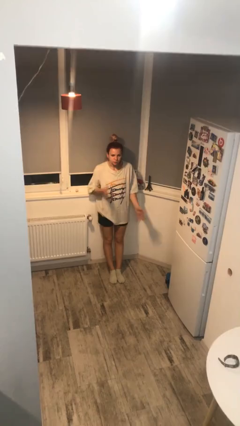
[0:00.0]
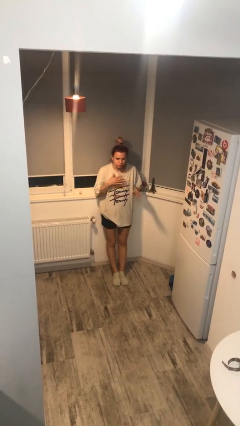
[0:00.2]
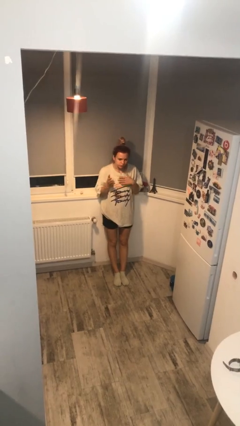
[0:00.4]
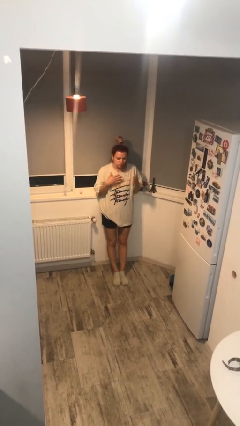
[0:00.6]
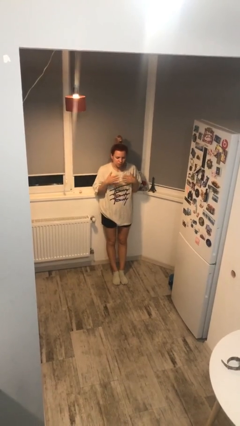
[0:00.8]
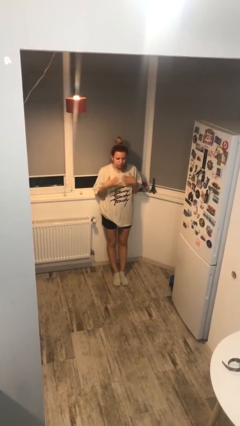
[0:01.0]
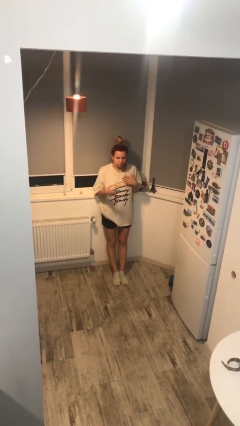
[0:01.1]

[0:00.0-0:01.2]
person drums on chest

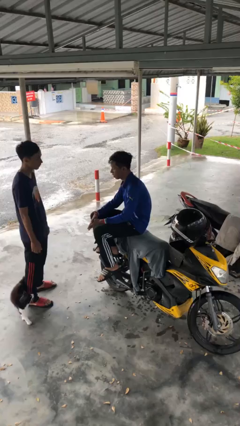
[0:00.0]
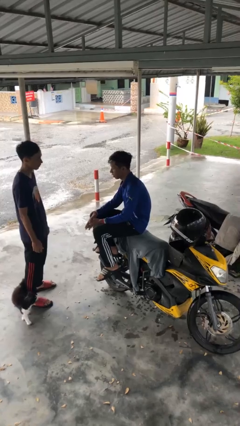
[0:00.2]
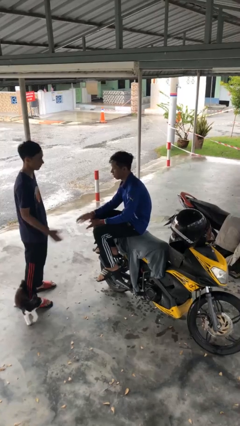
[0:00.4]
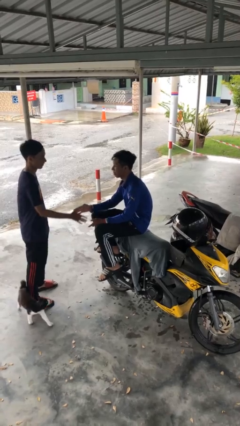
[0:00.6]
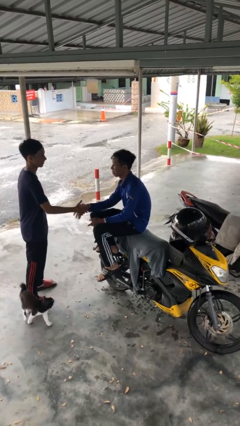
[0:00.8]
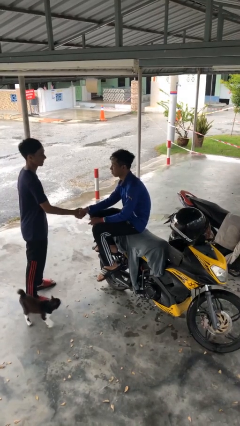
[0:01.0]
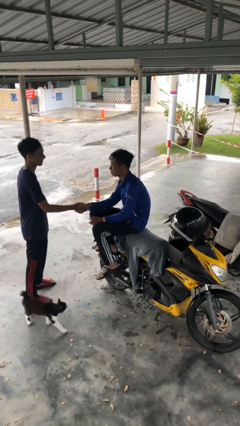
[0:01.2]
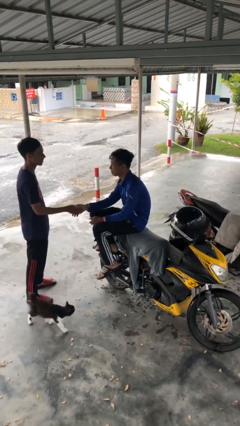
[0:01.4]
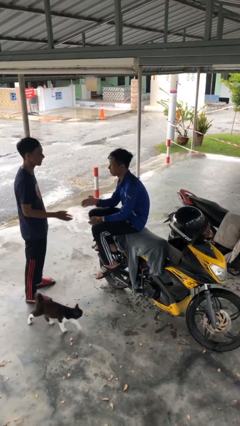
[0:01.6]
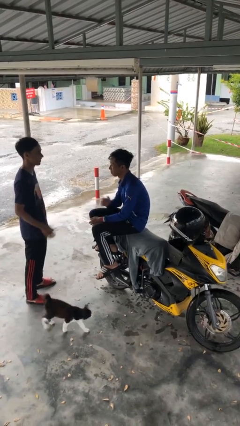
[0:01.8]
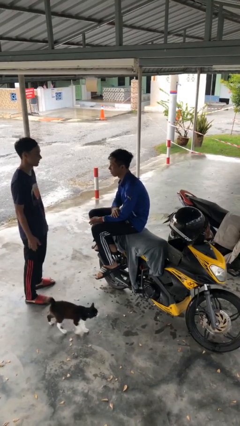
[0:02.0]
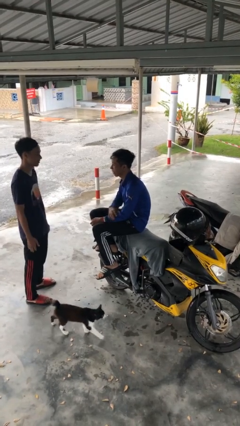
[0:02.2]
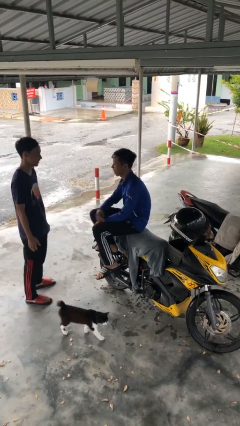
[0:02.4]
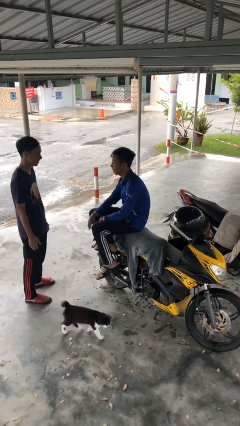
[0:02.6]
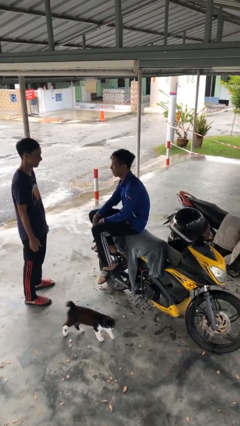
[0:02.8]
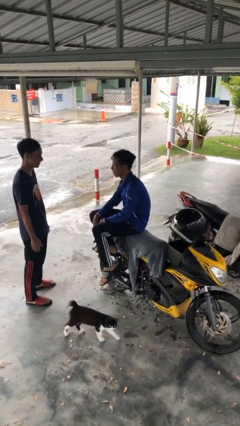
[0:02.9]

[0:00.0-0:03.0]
person shakes hand

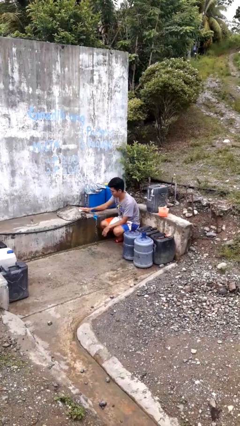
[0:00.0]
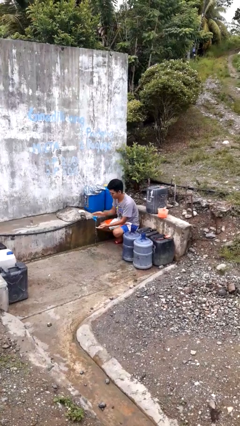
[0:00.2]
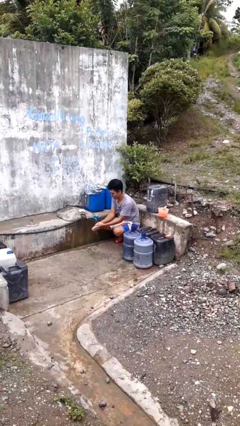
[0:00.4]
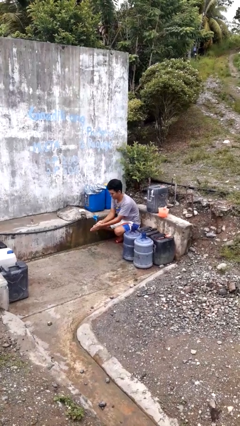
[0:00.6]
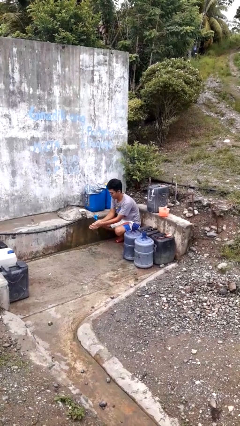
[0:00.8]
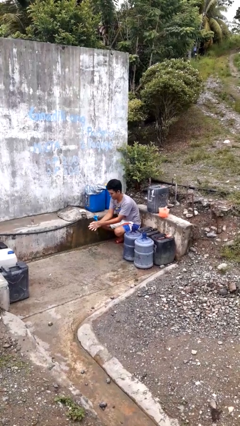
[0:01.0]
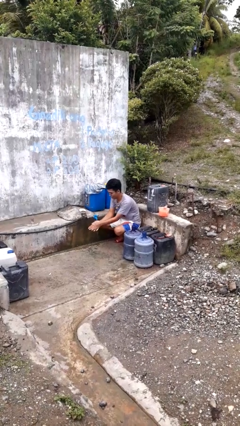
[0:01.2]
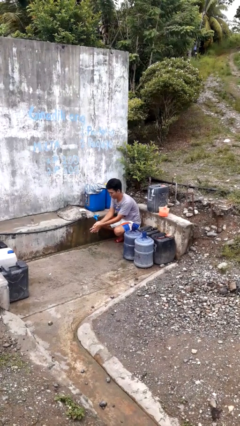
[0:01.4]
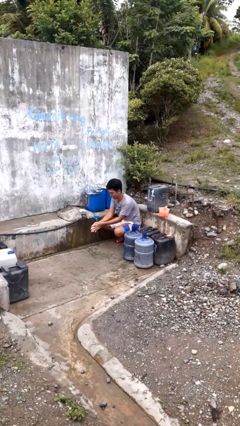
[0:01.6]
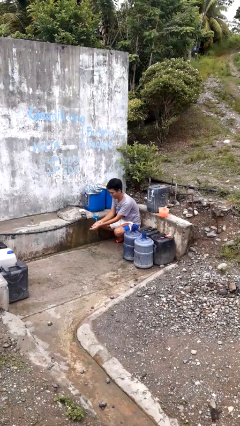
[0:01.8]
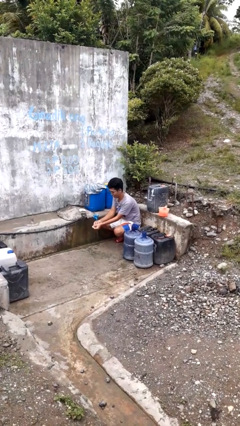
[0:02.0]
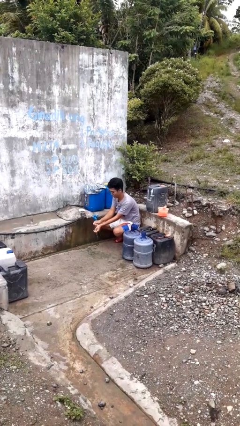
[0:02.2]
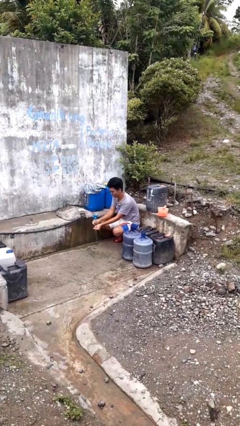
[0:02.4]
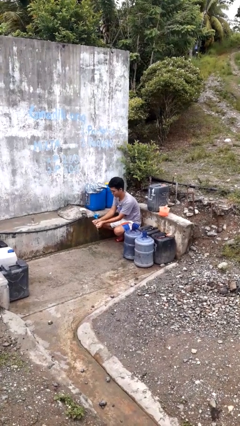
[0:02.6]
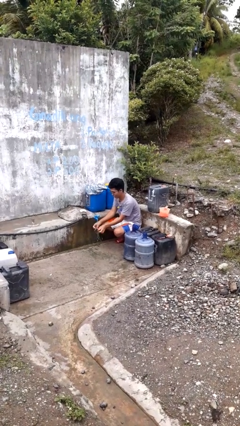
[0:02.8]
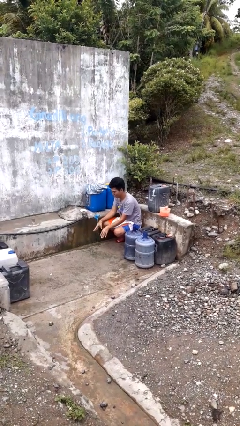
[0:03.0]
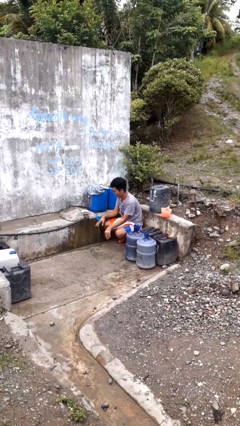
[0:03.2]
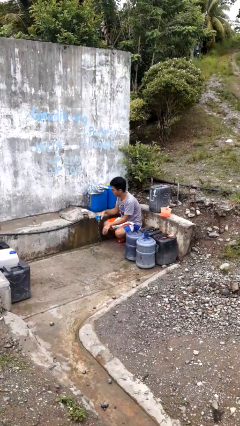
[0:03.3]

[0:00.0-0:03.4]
person washes hands

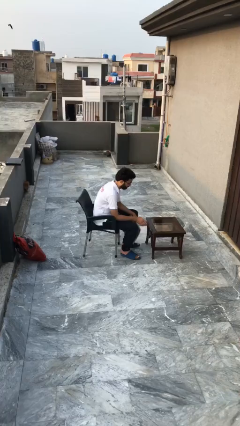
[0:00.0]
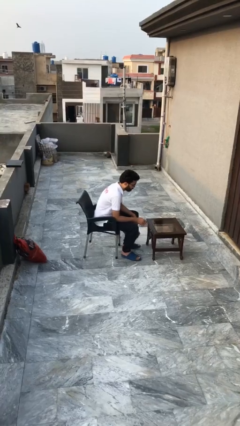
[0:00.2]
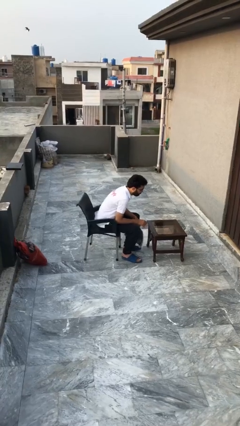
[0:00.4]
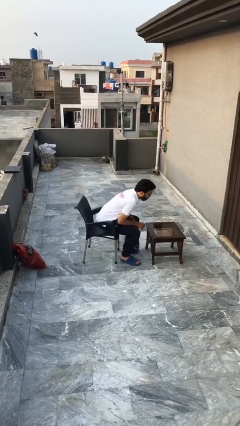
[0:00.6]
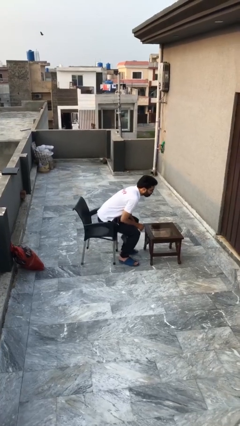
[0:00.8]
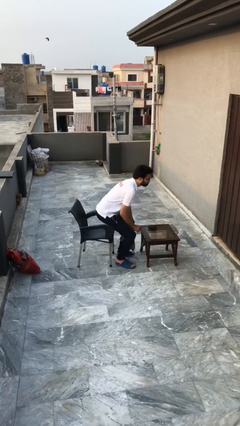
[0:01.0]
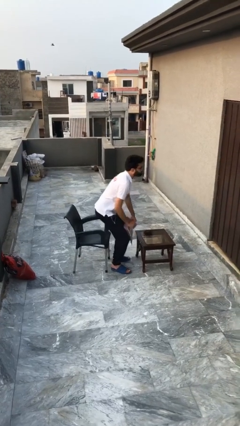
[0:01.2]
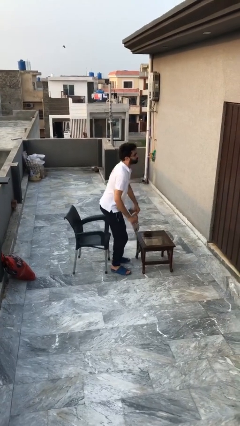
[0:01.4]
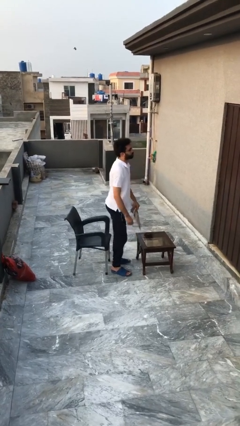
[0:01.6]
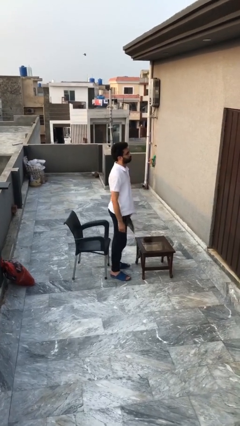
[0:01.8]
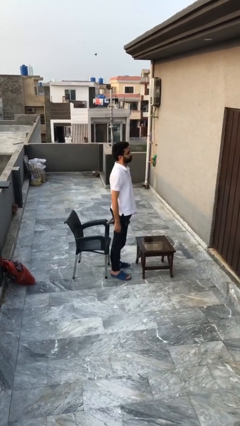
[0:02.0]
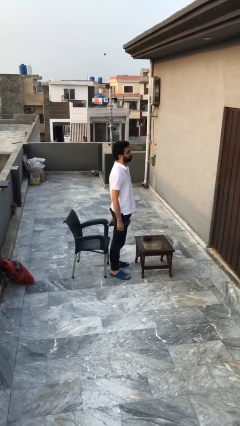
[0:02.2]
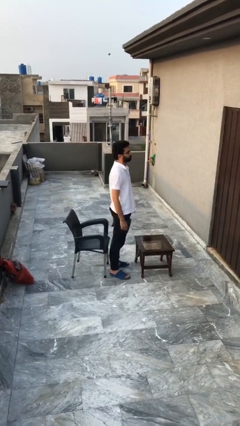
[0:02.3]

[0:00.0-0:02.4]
person stands up

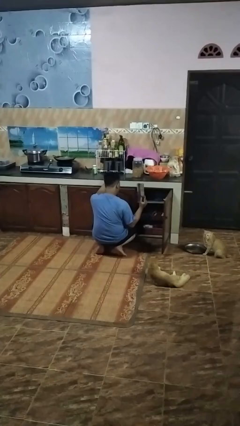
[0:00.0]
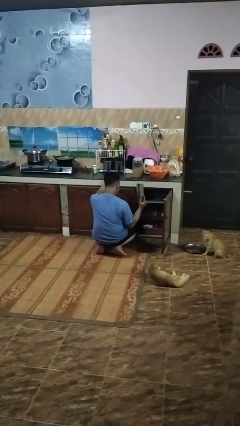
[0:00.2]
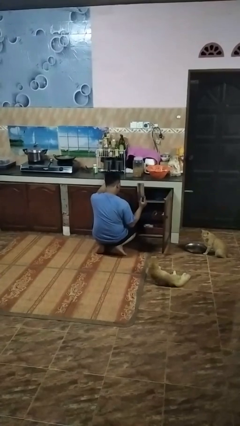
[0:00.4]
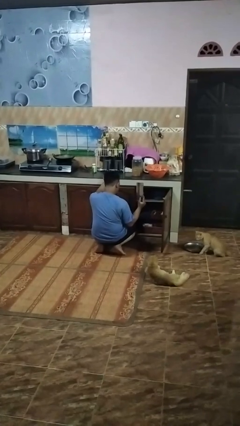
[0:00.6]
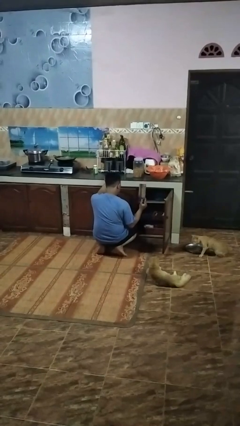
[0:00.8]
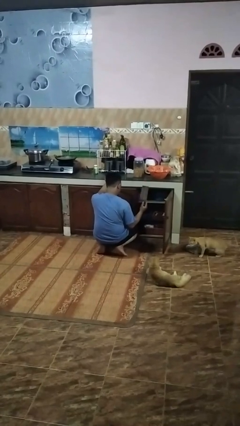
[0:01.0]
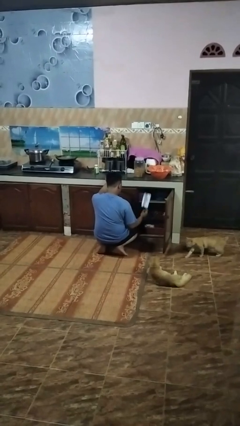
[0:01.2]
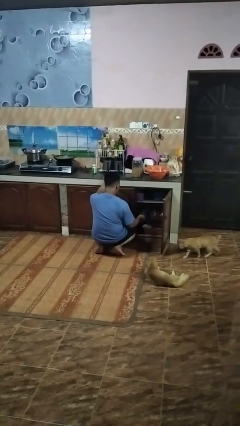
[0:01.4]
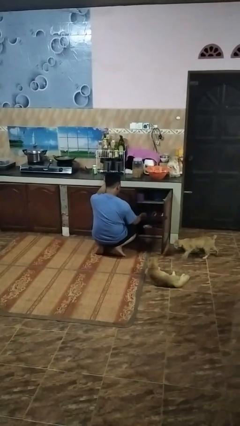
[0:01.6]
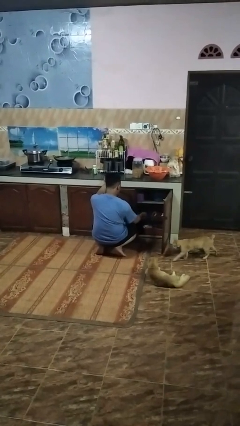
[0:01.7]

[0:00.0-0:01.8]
person takes object from kitchen drawer

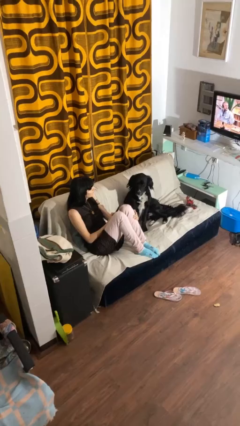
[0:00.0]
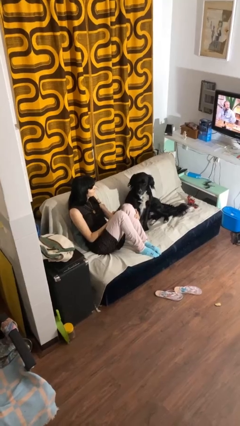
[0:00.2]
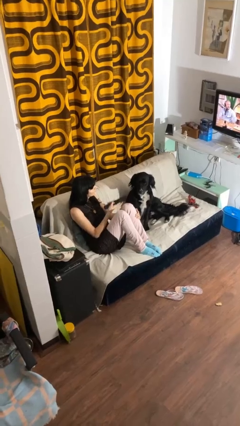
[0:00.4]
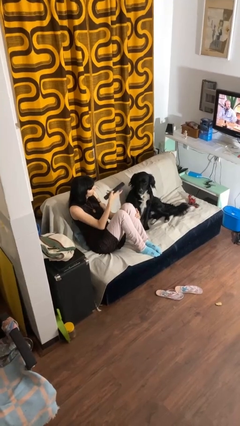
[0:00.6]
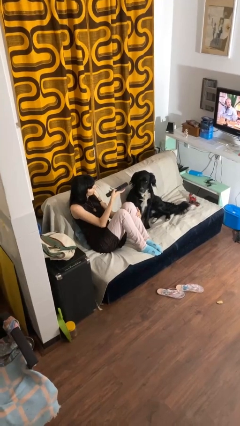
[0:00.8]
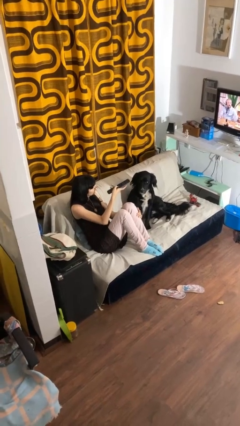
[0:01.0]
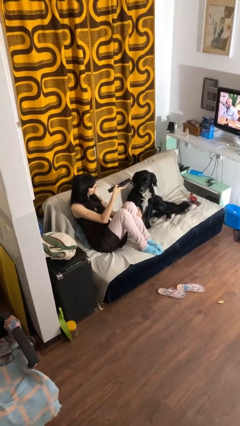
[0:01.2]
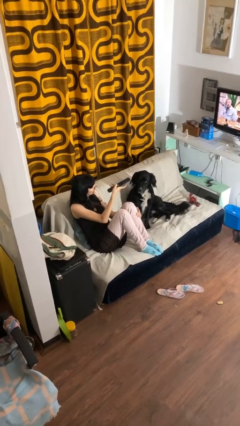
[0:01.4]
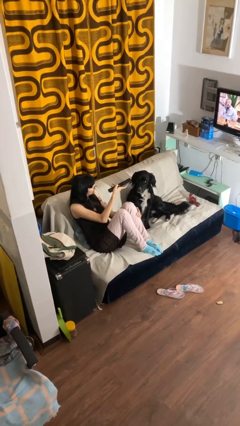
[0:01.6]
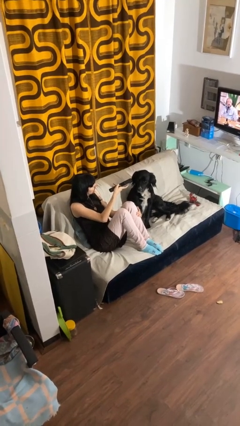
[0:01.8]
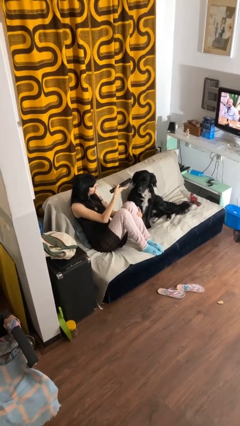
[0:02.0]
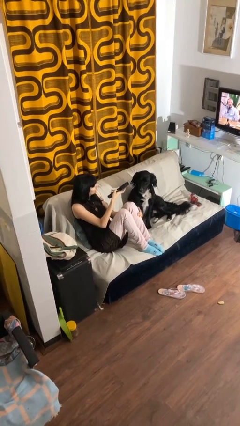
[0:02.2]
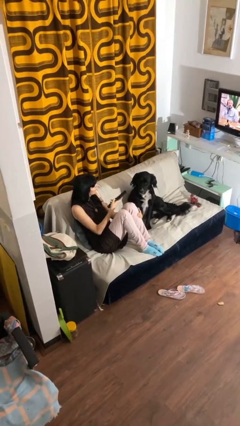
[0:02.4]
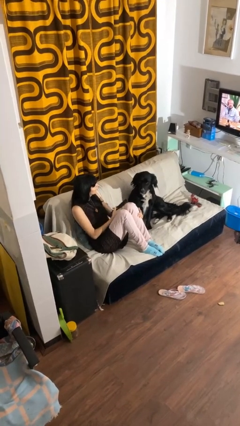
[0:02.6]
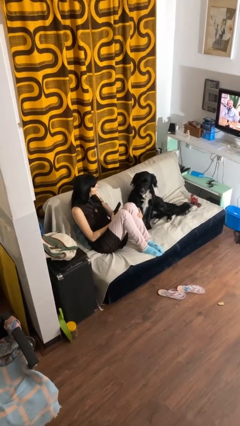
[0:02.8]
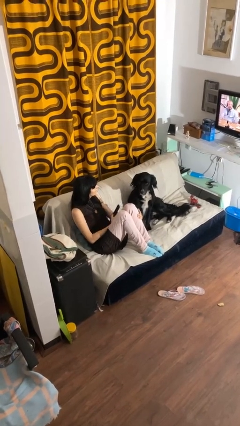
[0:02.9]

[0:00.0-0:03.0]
person uses television remote

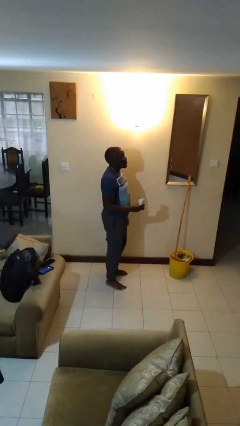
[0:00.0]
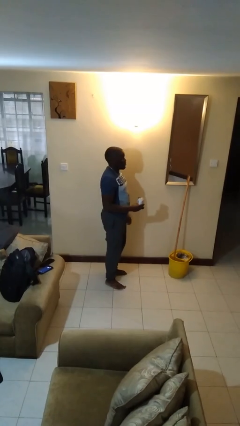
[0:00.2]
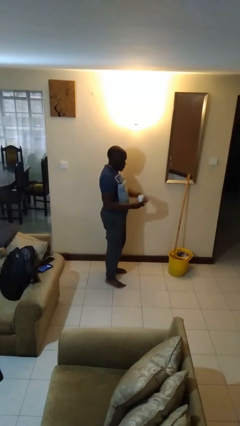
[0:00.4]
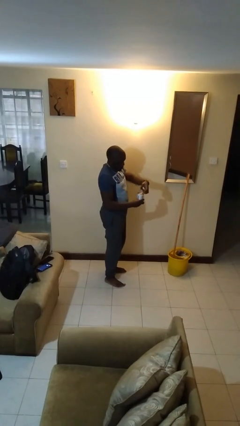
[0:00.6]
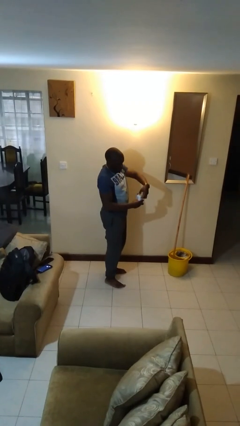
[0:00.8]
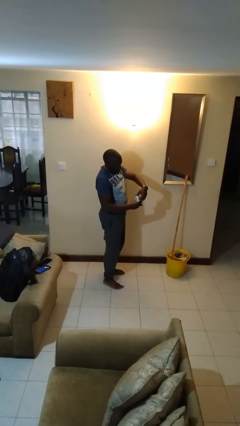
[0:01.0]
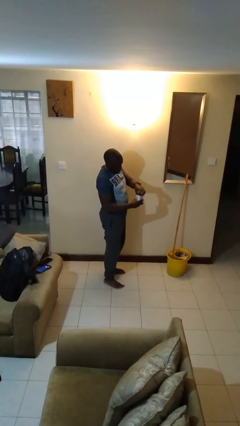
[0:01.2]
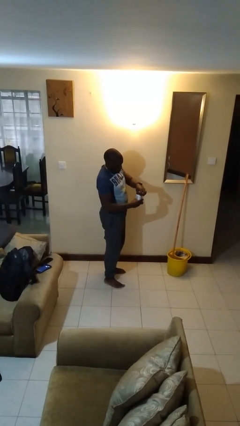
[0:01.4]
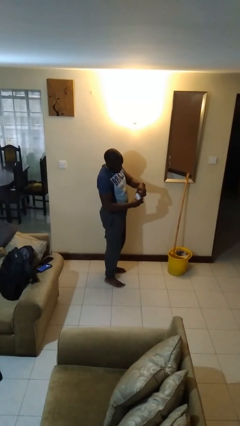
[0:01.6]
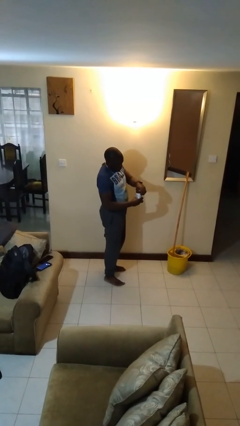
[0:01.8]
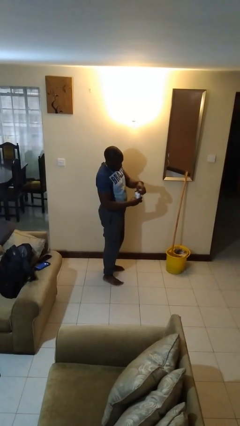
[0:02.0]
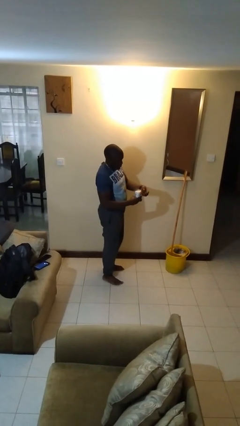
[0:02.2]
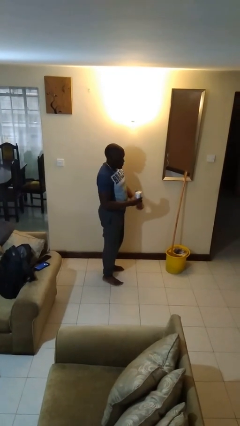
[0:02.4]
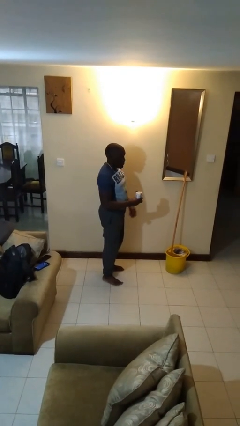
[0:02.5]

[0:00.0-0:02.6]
person opens beverage can
